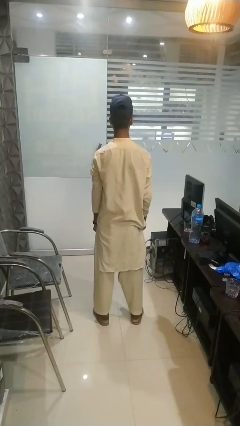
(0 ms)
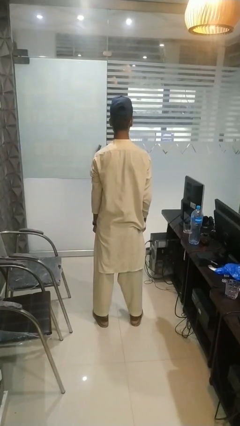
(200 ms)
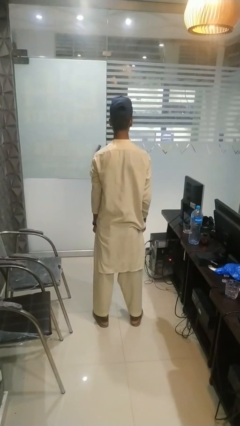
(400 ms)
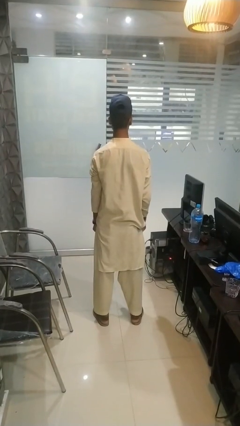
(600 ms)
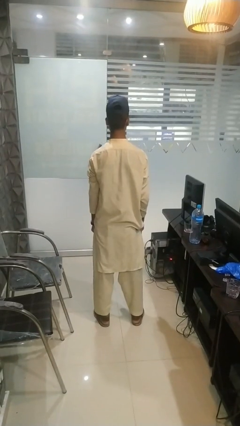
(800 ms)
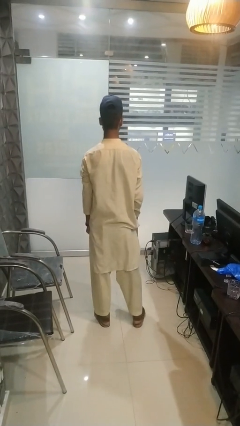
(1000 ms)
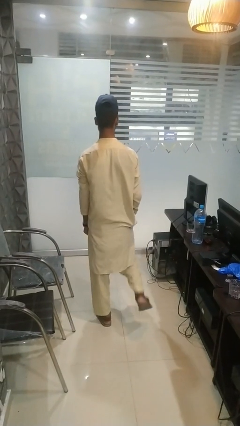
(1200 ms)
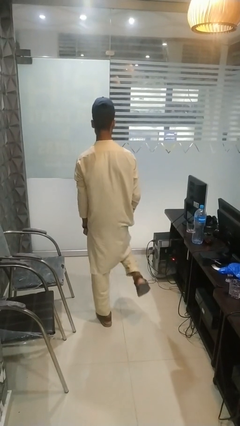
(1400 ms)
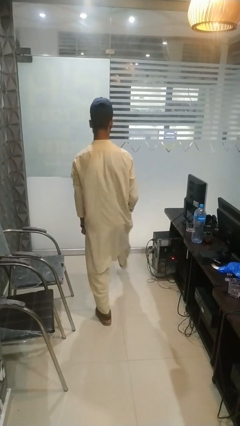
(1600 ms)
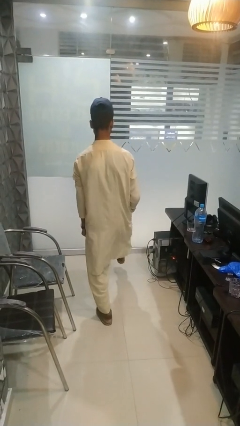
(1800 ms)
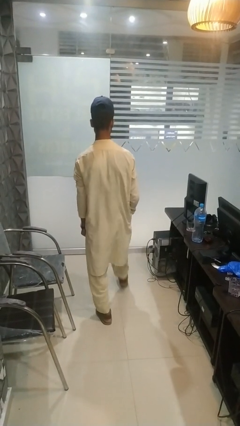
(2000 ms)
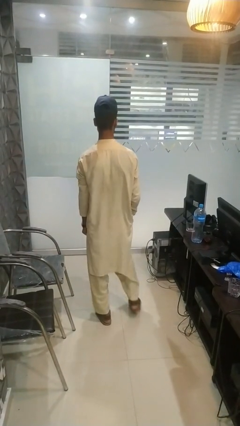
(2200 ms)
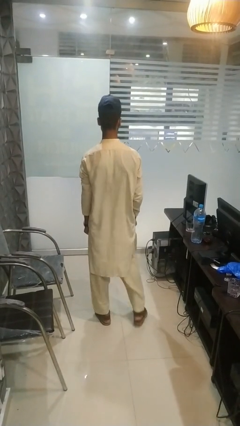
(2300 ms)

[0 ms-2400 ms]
person karate kicks

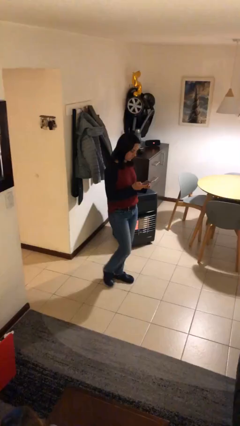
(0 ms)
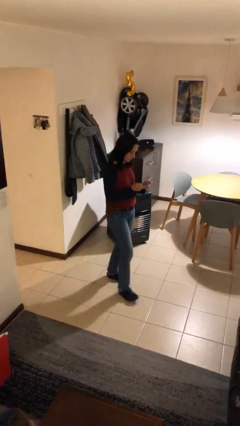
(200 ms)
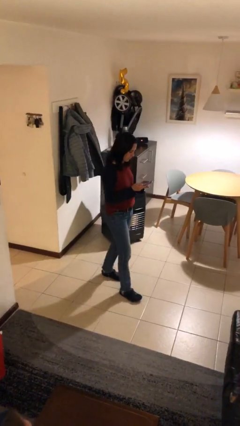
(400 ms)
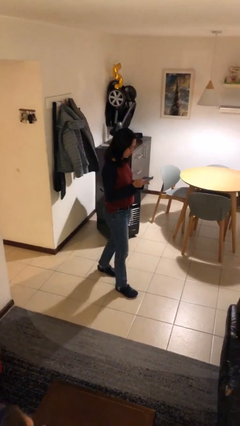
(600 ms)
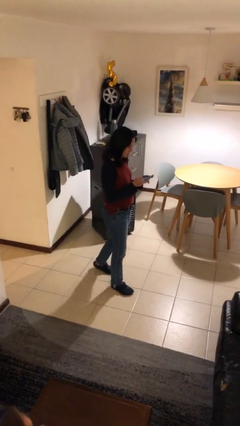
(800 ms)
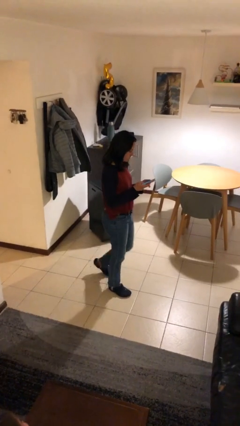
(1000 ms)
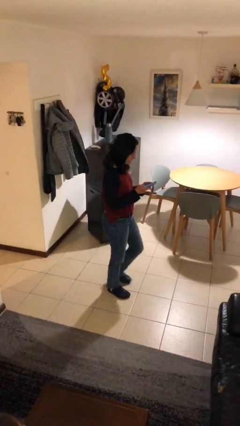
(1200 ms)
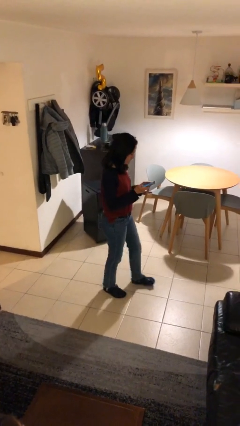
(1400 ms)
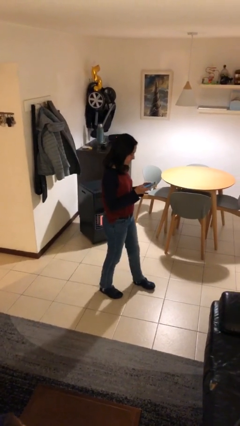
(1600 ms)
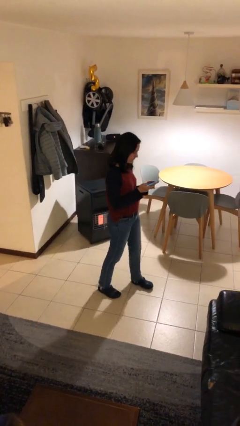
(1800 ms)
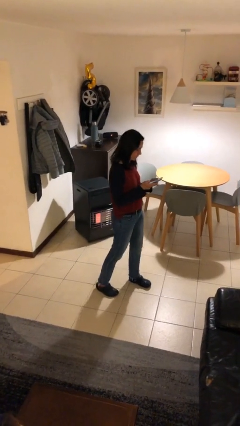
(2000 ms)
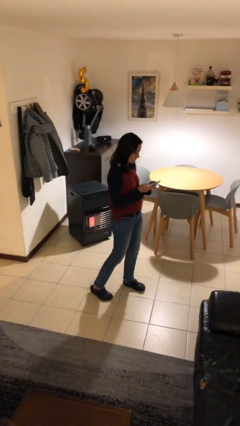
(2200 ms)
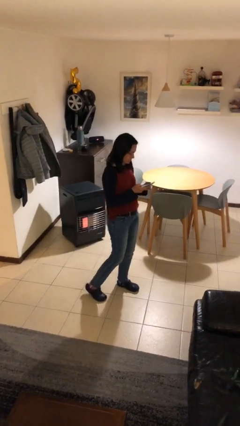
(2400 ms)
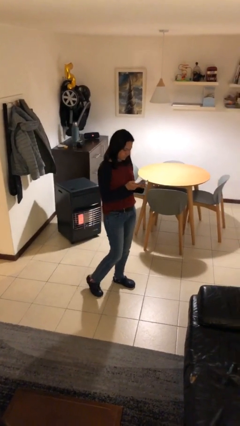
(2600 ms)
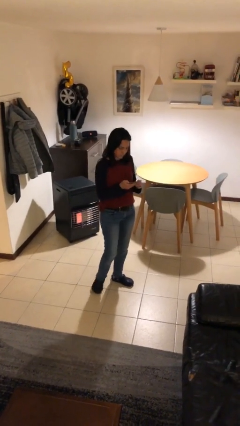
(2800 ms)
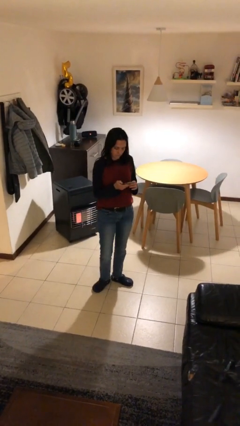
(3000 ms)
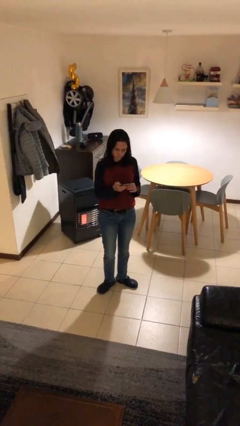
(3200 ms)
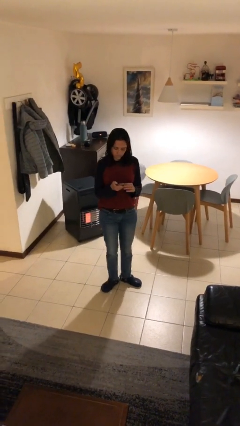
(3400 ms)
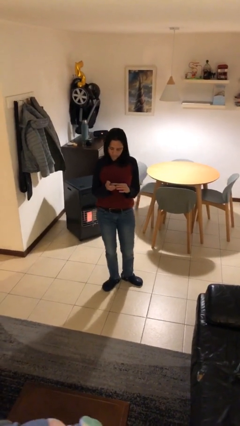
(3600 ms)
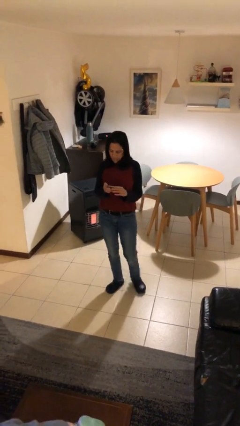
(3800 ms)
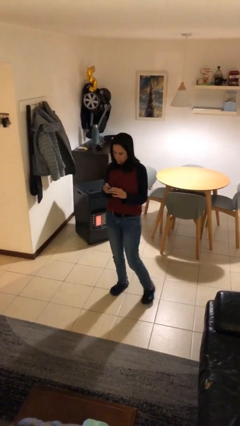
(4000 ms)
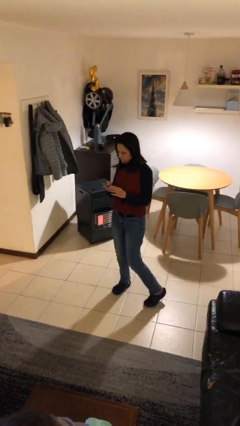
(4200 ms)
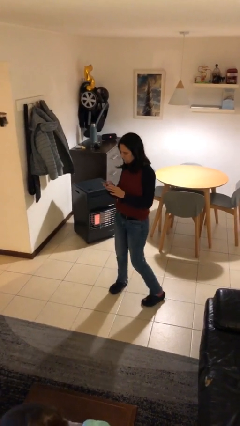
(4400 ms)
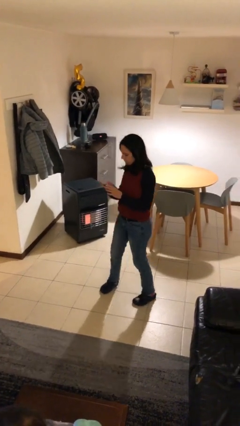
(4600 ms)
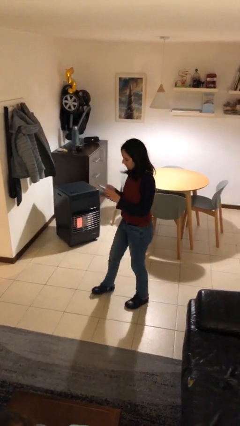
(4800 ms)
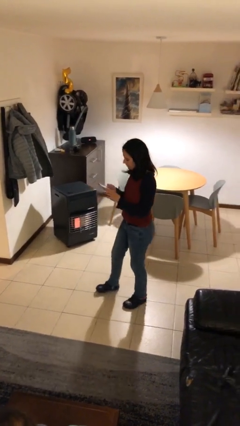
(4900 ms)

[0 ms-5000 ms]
person texts on phone

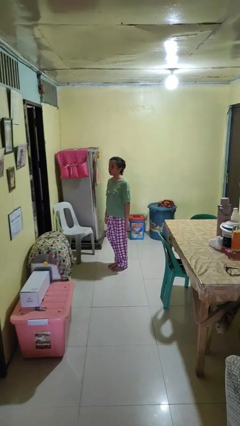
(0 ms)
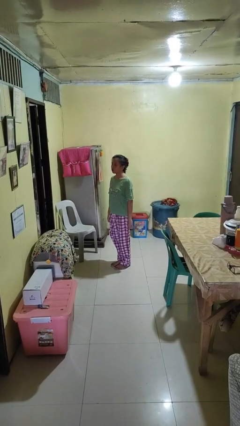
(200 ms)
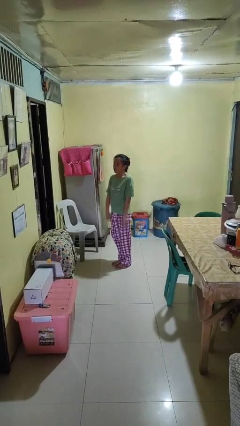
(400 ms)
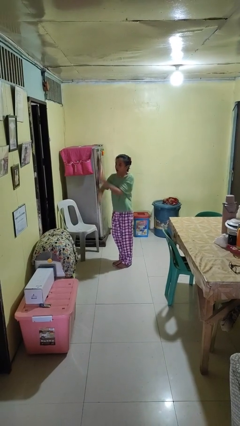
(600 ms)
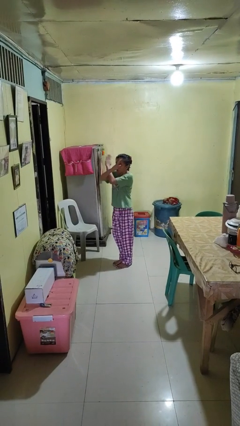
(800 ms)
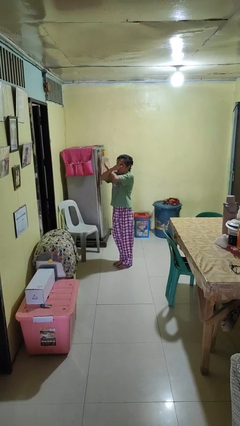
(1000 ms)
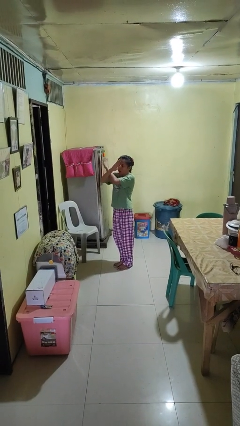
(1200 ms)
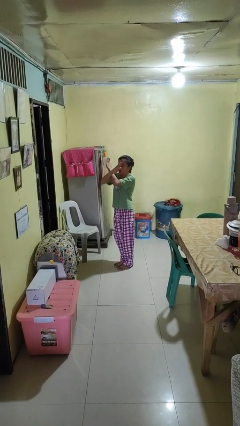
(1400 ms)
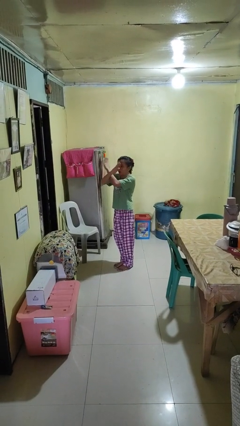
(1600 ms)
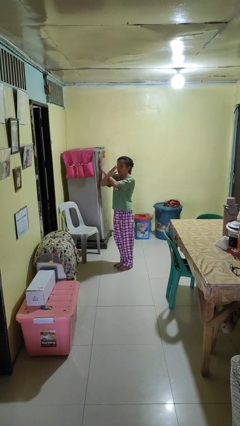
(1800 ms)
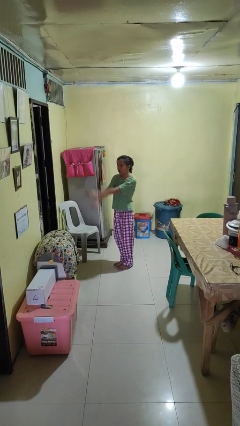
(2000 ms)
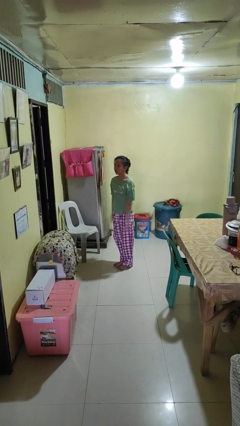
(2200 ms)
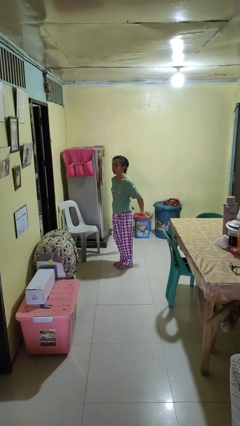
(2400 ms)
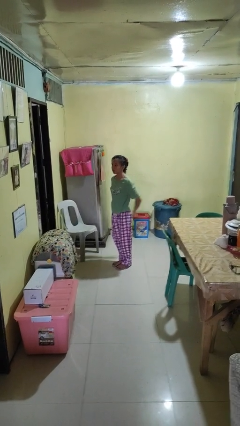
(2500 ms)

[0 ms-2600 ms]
person gestures arms x

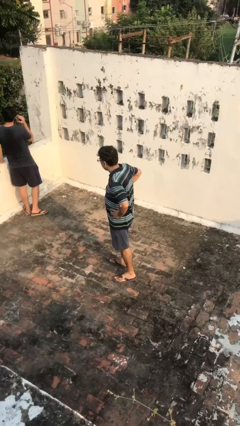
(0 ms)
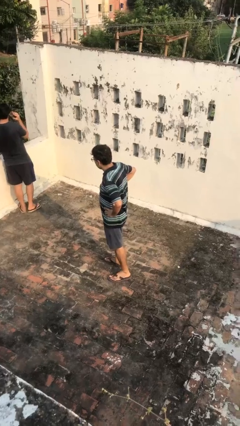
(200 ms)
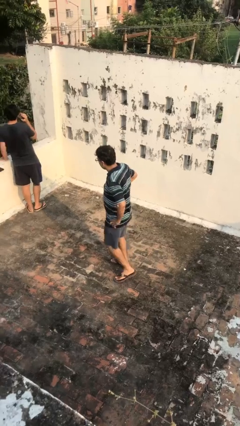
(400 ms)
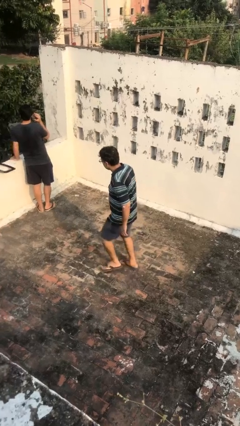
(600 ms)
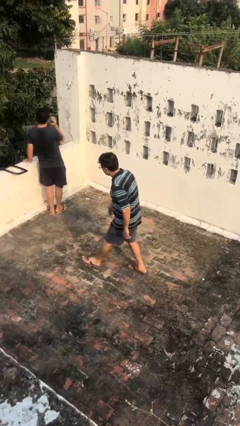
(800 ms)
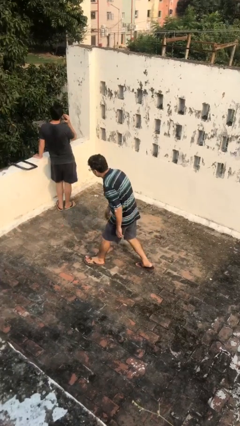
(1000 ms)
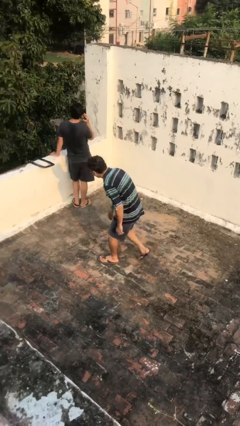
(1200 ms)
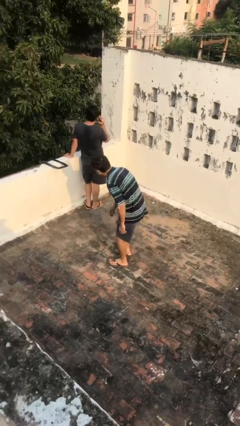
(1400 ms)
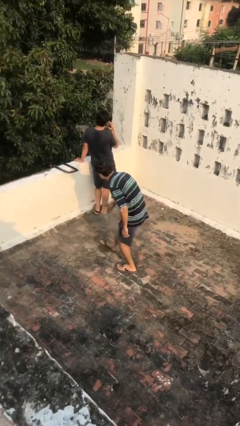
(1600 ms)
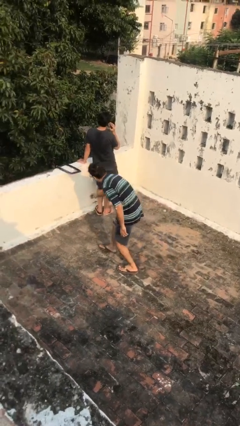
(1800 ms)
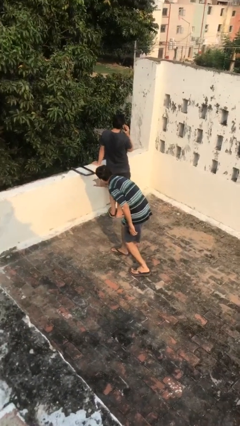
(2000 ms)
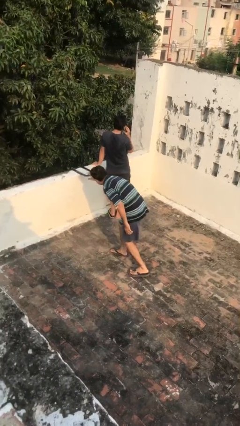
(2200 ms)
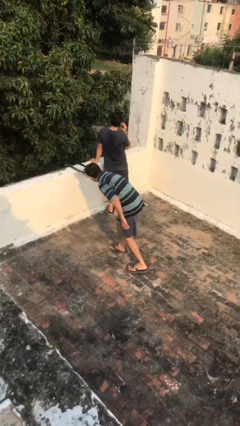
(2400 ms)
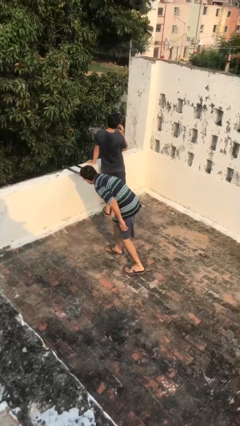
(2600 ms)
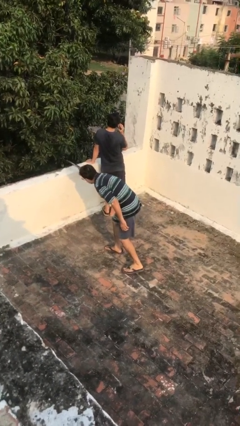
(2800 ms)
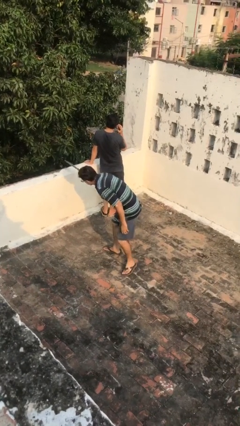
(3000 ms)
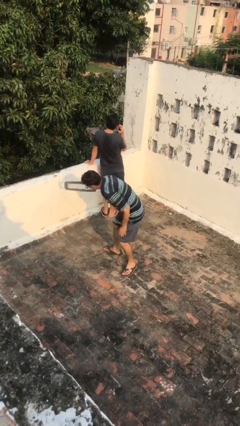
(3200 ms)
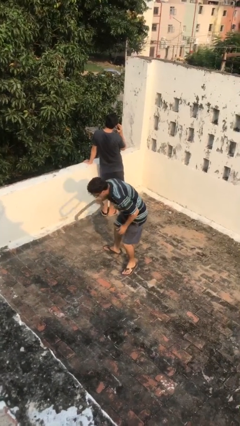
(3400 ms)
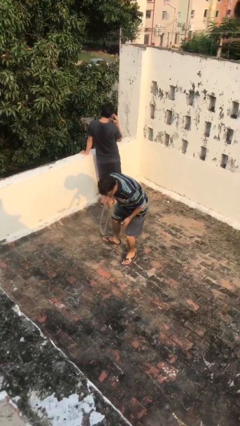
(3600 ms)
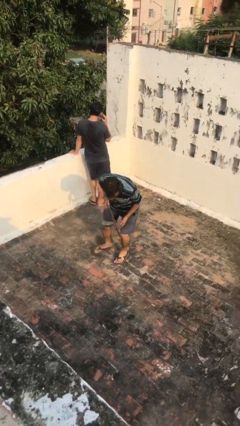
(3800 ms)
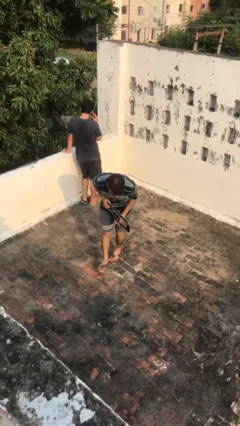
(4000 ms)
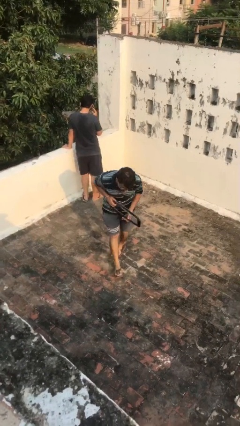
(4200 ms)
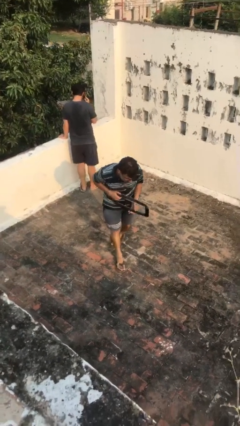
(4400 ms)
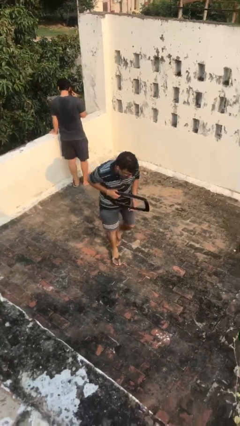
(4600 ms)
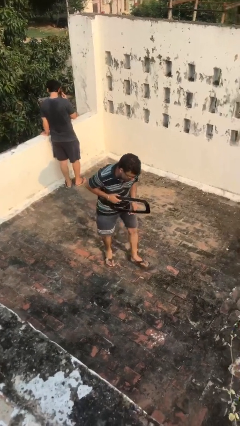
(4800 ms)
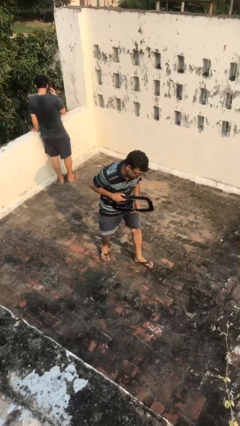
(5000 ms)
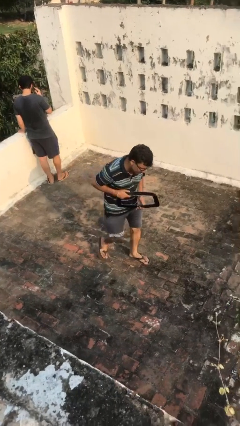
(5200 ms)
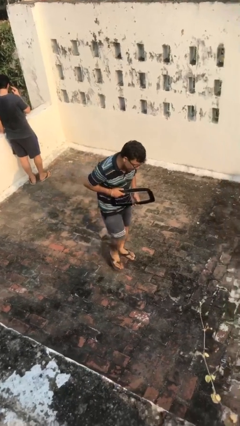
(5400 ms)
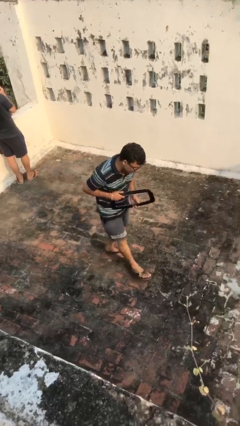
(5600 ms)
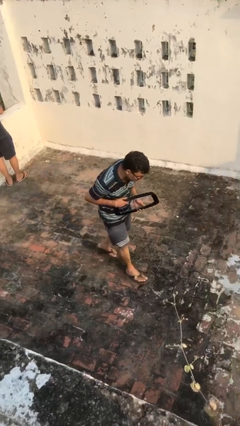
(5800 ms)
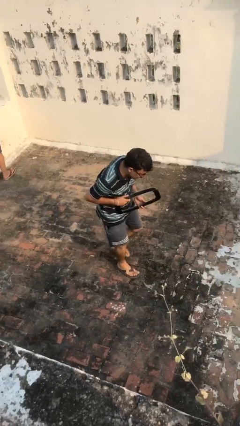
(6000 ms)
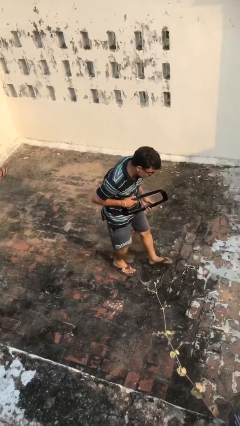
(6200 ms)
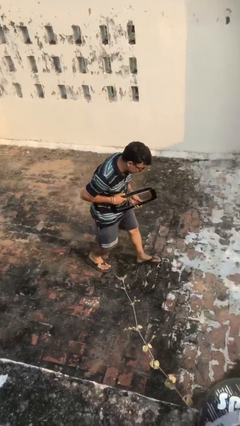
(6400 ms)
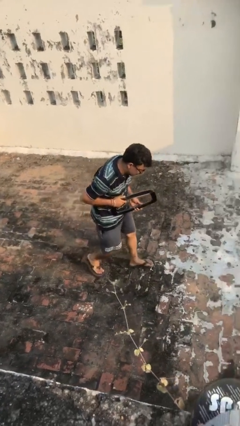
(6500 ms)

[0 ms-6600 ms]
person steals object from person

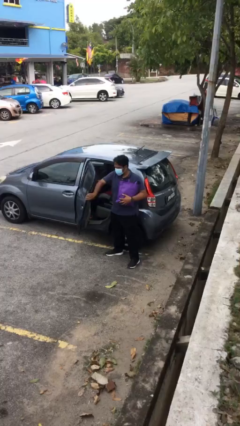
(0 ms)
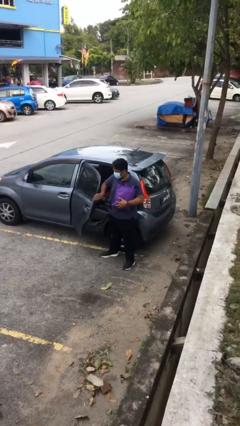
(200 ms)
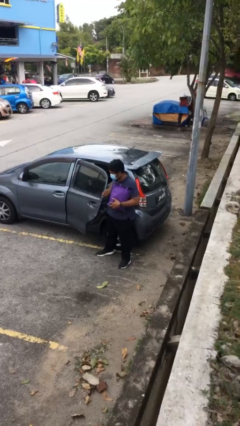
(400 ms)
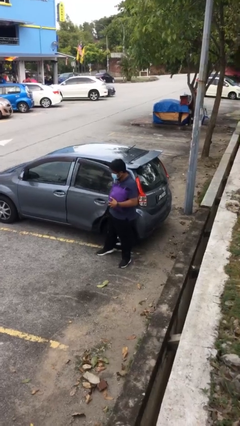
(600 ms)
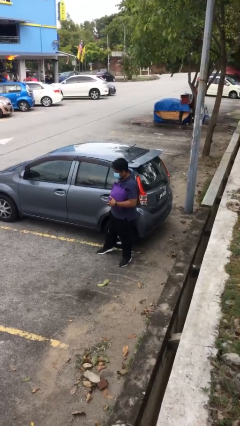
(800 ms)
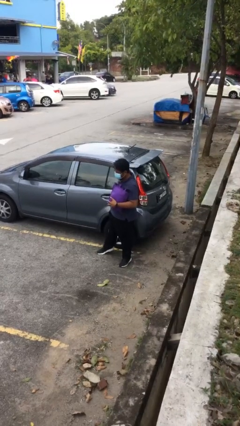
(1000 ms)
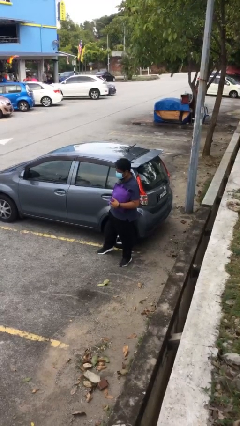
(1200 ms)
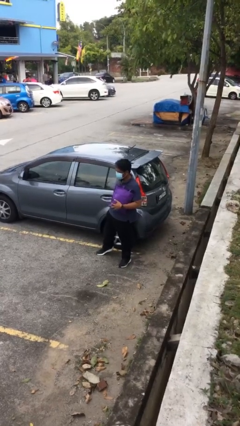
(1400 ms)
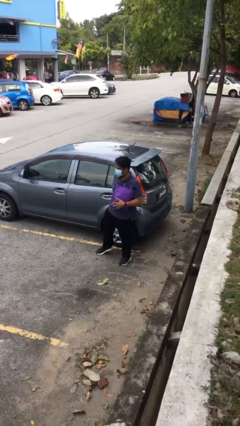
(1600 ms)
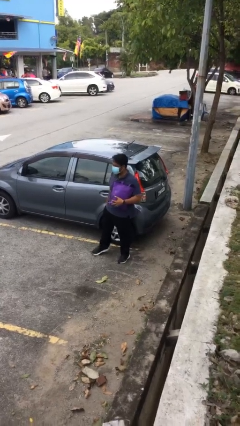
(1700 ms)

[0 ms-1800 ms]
person closes car door
